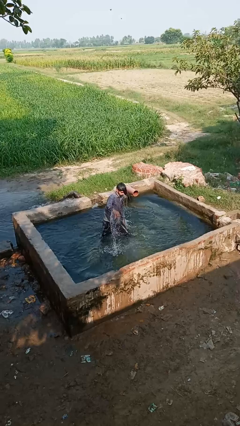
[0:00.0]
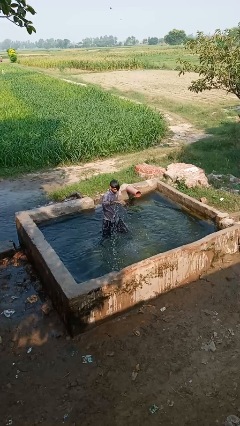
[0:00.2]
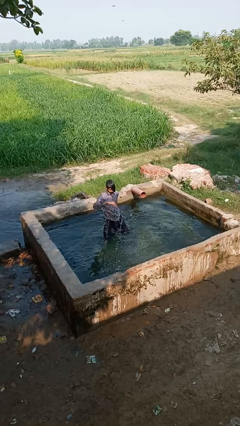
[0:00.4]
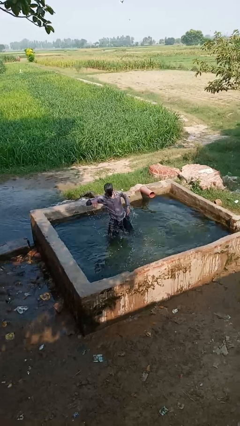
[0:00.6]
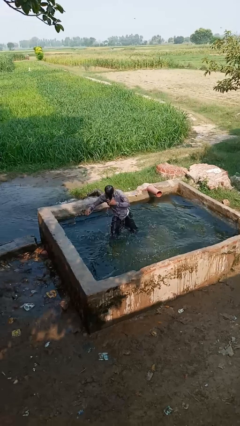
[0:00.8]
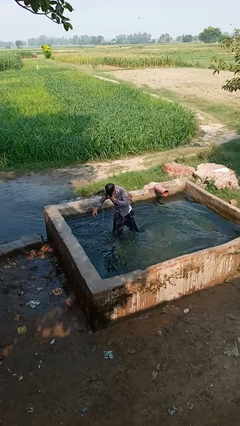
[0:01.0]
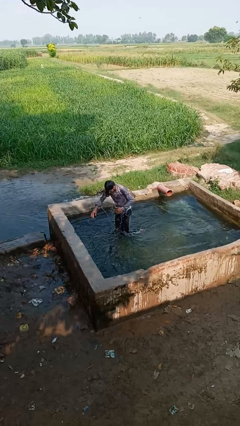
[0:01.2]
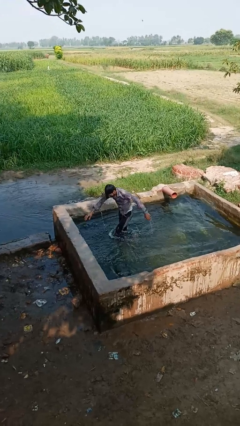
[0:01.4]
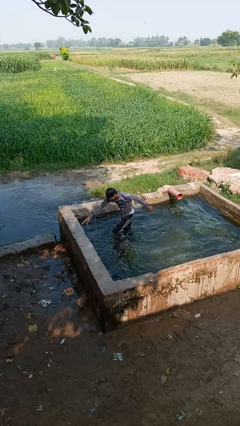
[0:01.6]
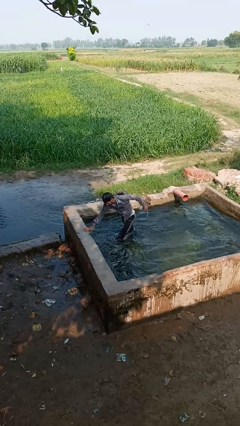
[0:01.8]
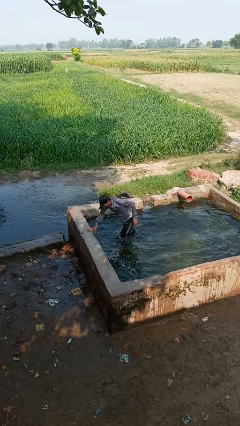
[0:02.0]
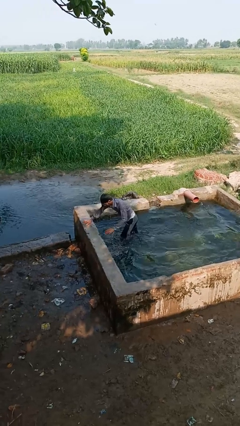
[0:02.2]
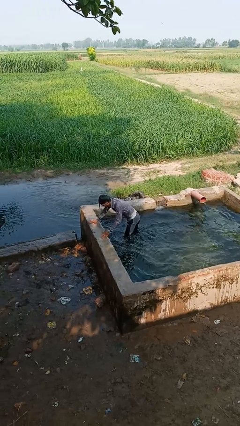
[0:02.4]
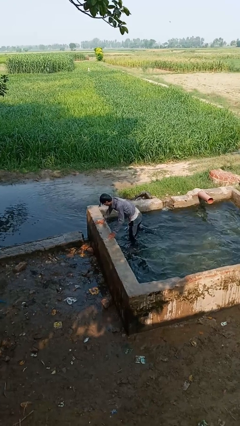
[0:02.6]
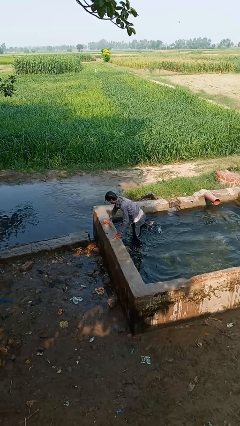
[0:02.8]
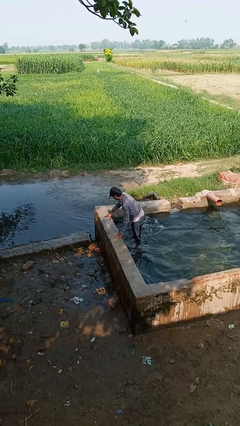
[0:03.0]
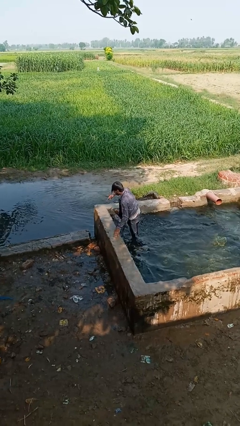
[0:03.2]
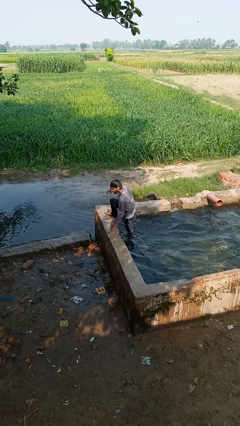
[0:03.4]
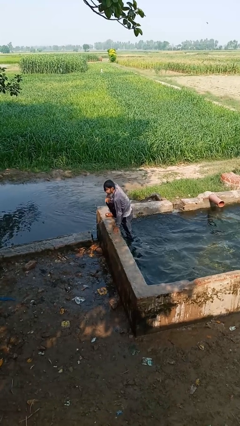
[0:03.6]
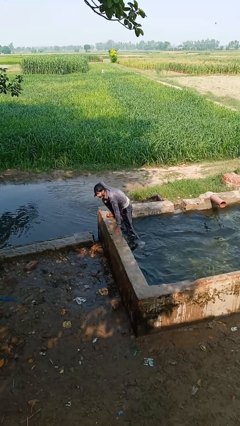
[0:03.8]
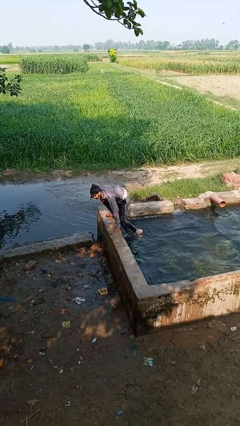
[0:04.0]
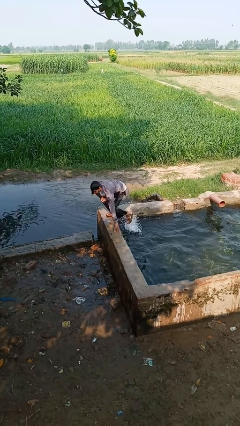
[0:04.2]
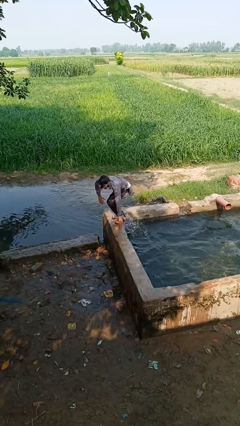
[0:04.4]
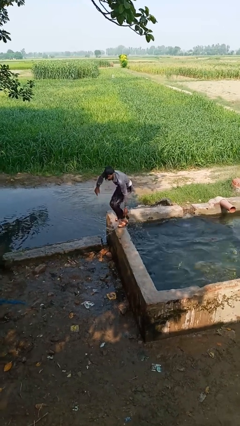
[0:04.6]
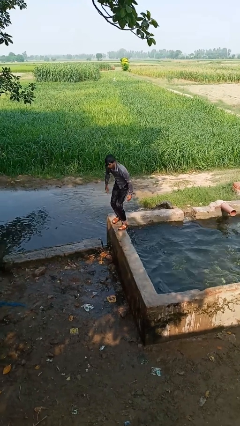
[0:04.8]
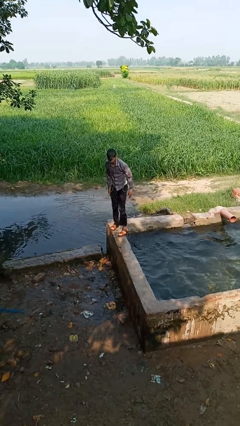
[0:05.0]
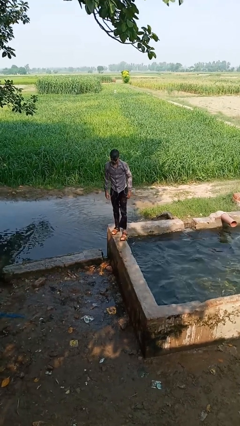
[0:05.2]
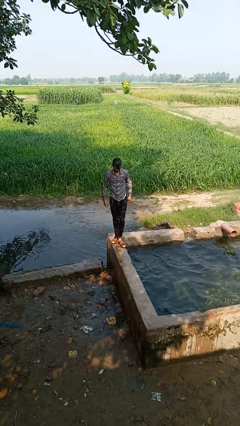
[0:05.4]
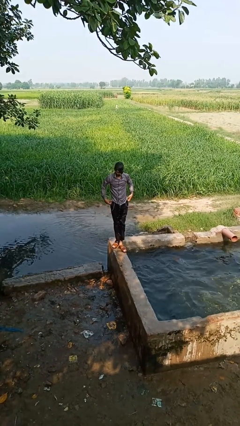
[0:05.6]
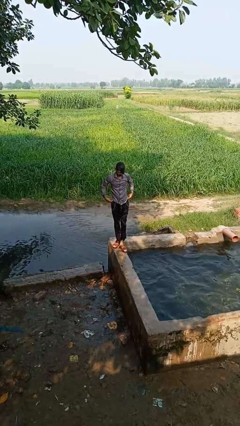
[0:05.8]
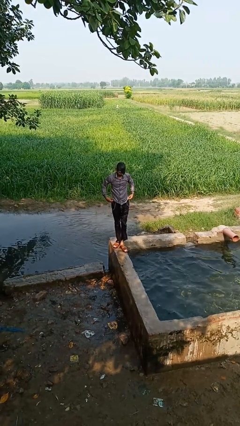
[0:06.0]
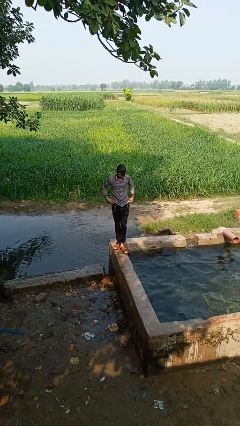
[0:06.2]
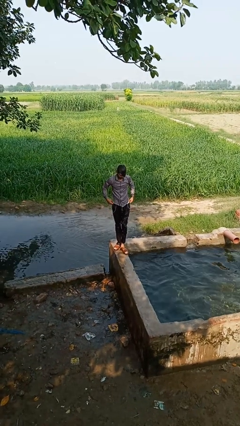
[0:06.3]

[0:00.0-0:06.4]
person exits pool

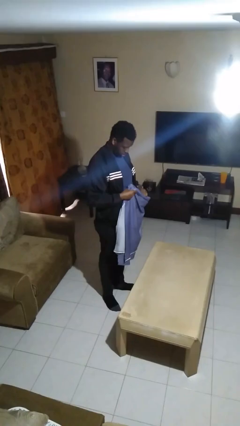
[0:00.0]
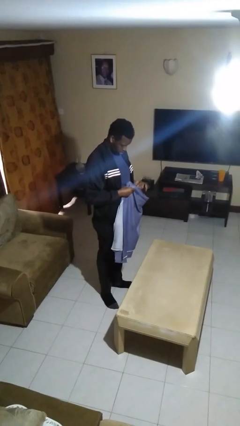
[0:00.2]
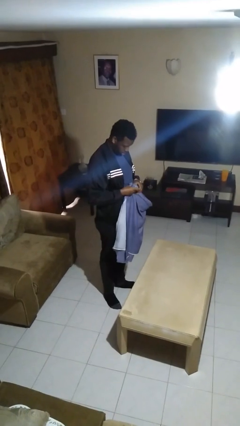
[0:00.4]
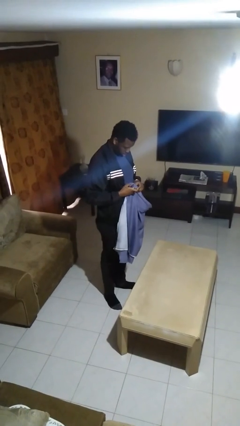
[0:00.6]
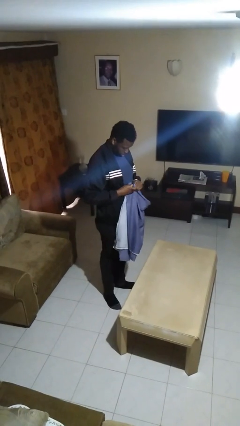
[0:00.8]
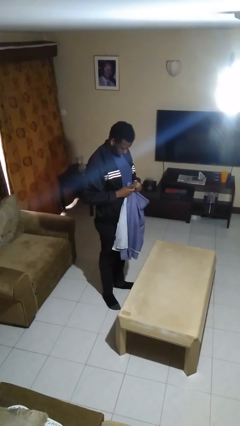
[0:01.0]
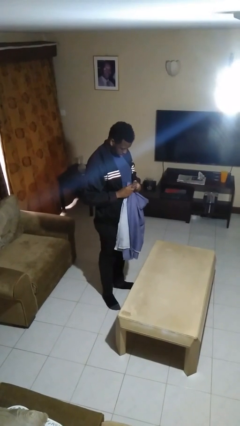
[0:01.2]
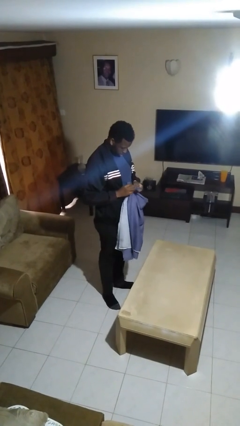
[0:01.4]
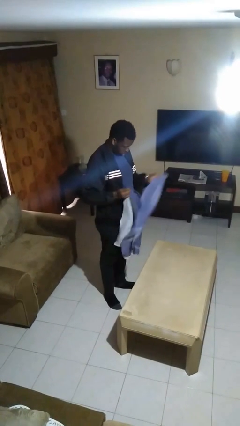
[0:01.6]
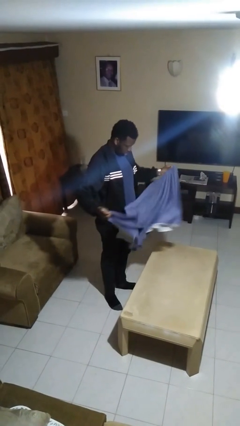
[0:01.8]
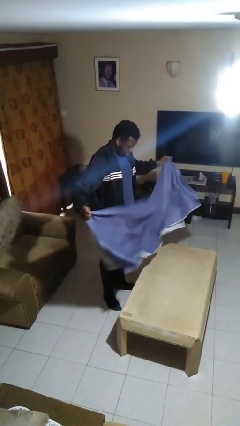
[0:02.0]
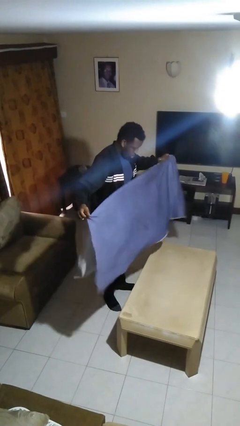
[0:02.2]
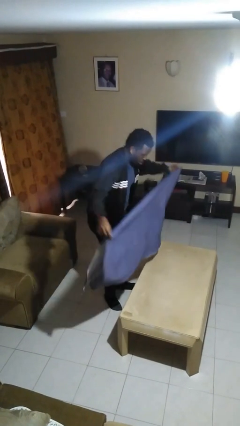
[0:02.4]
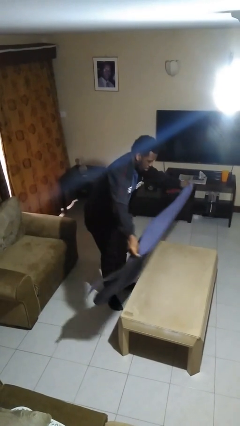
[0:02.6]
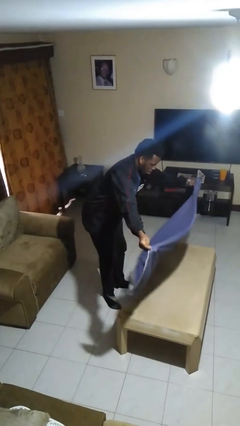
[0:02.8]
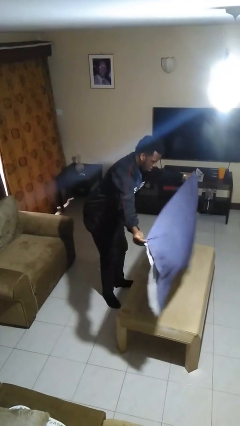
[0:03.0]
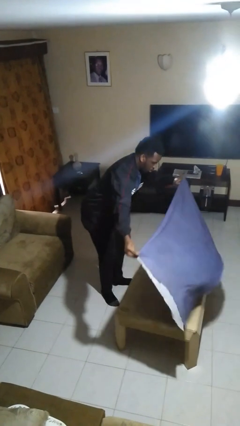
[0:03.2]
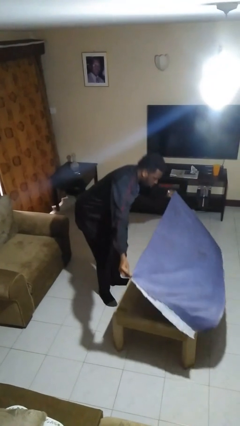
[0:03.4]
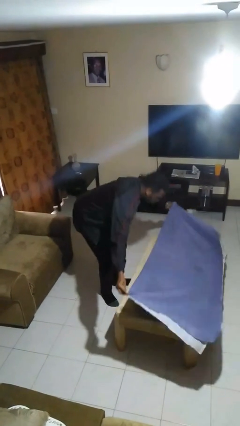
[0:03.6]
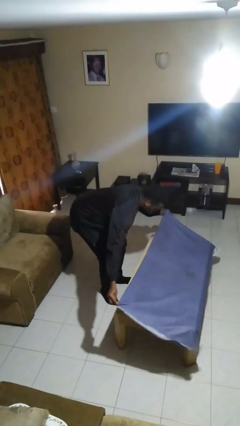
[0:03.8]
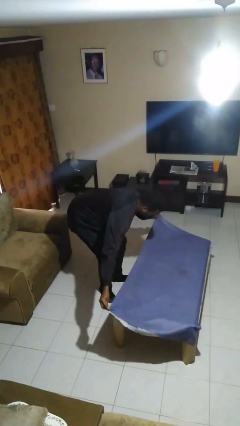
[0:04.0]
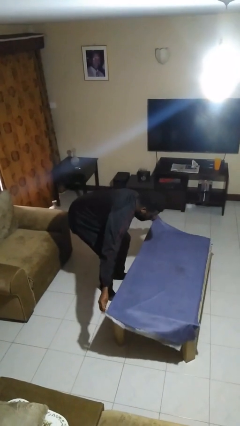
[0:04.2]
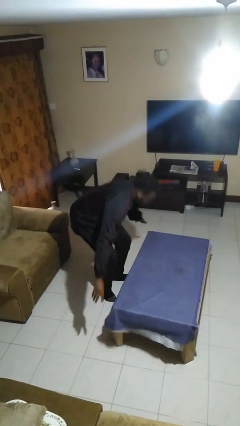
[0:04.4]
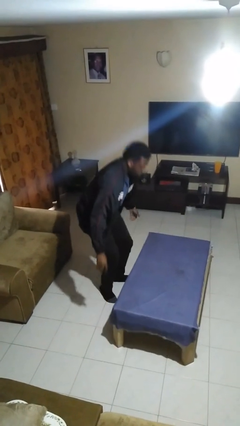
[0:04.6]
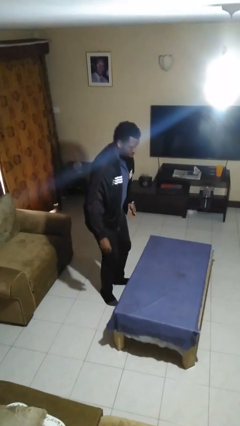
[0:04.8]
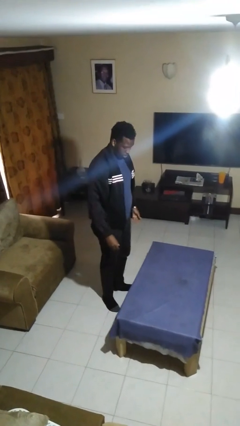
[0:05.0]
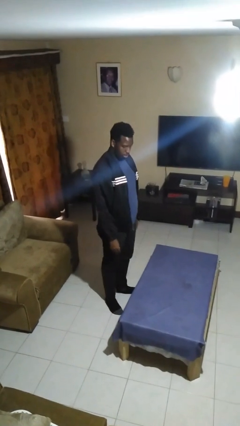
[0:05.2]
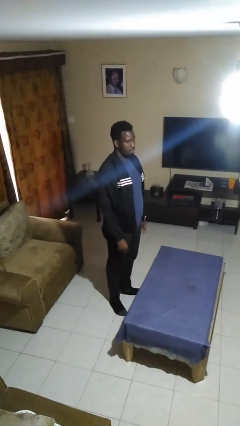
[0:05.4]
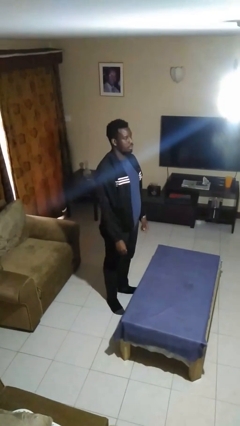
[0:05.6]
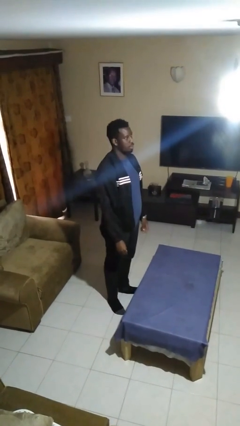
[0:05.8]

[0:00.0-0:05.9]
person folds blanket

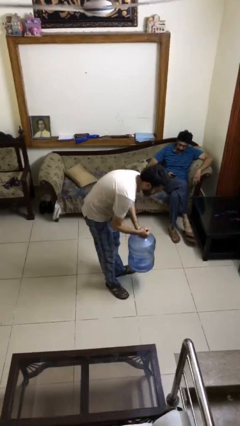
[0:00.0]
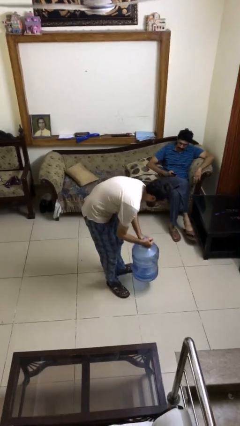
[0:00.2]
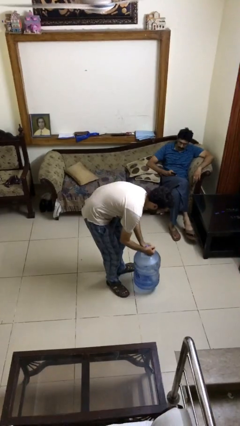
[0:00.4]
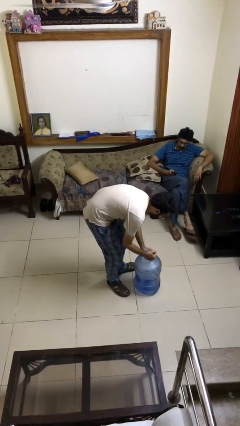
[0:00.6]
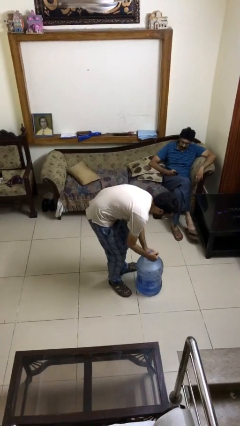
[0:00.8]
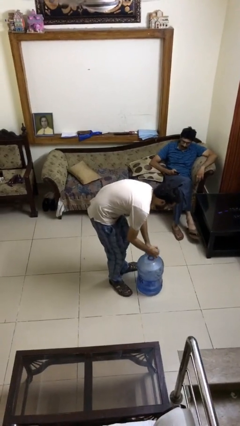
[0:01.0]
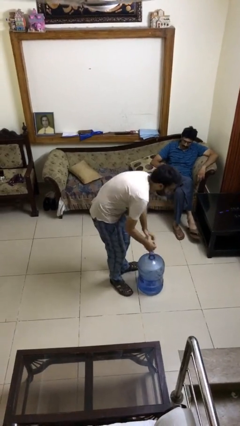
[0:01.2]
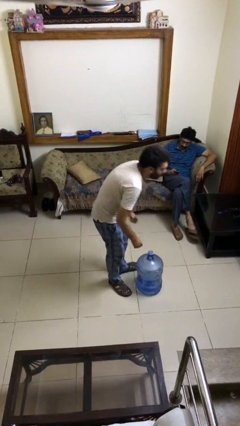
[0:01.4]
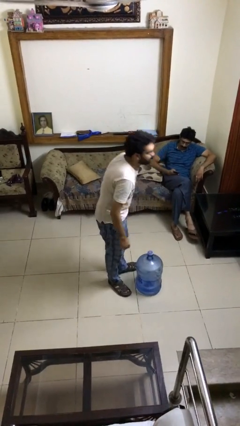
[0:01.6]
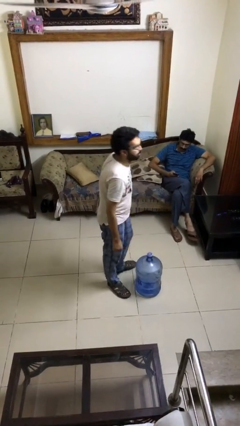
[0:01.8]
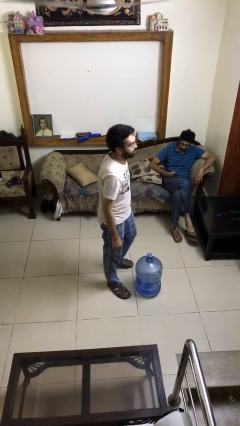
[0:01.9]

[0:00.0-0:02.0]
person puts down object on floor

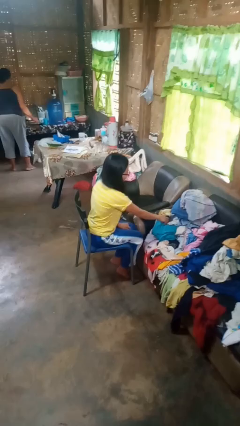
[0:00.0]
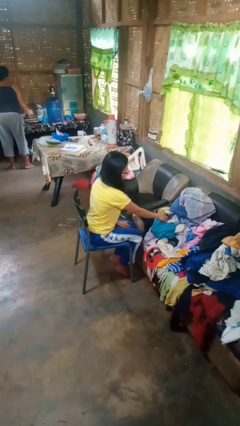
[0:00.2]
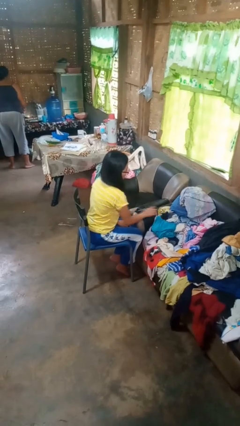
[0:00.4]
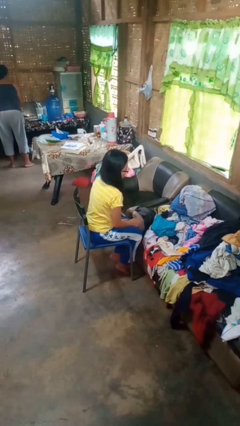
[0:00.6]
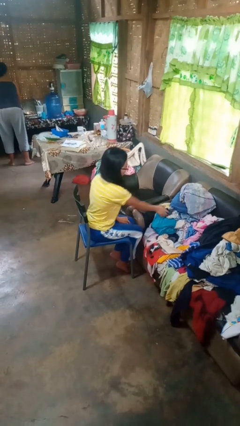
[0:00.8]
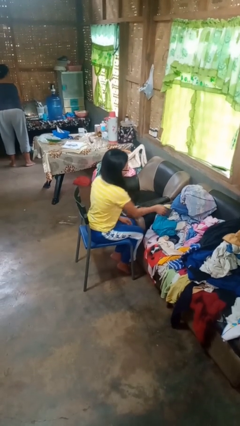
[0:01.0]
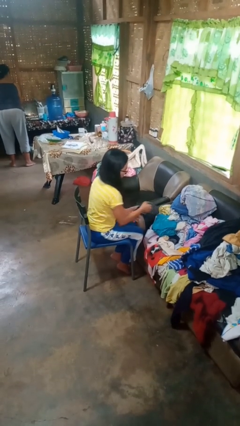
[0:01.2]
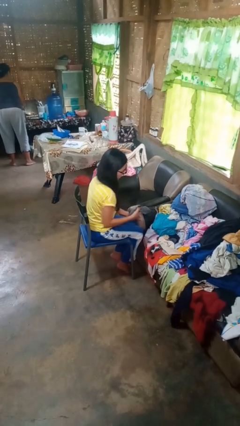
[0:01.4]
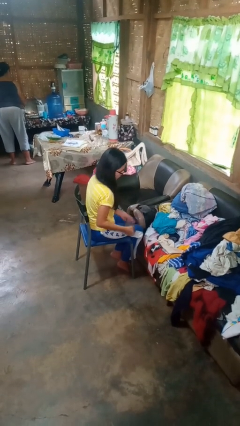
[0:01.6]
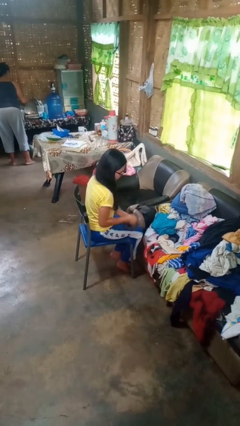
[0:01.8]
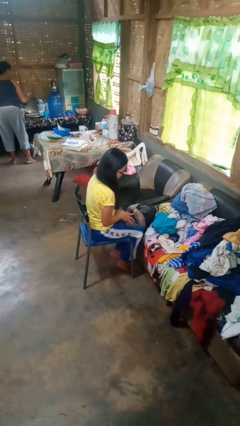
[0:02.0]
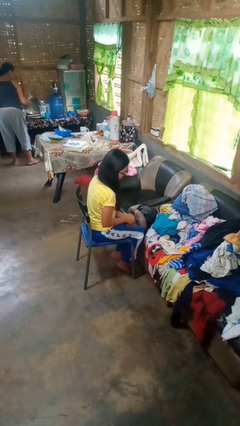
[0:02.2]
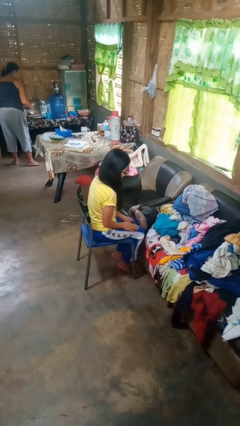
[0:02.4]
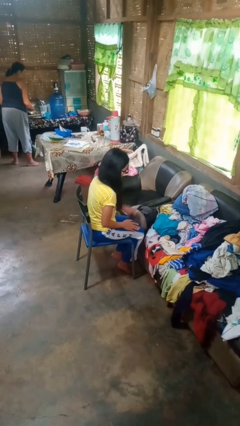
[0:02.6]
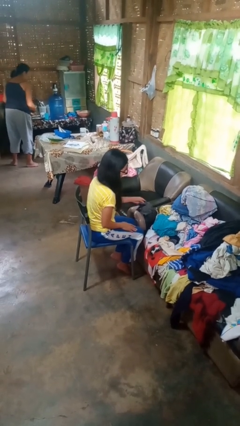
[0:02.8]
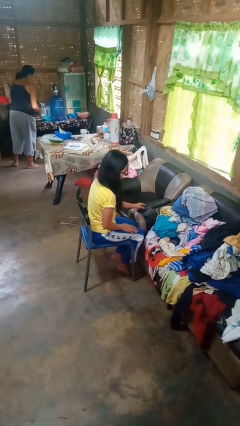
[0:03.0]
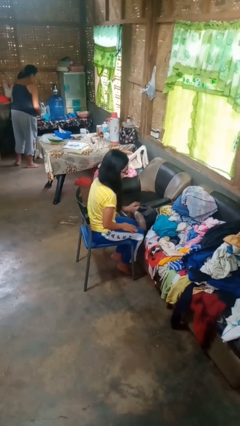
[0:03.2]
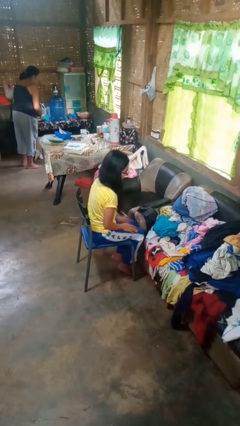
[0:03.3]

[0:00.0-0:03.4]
person folds socks
